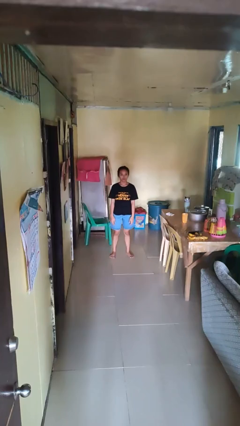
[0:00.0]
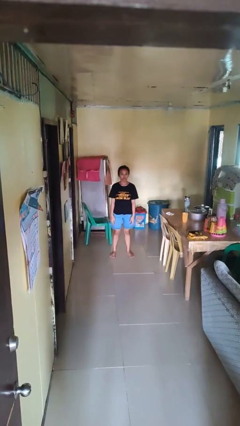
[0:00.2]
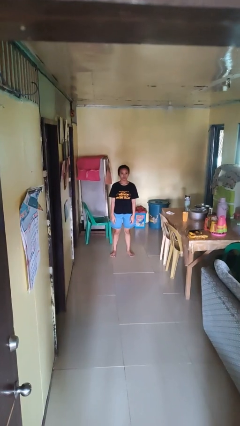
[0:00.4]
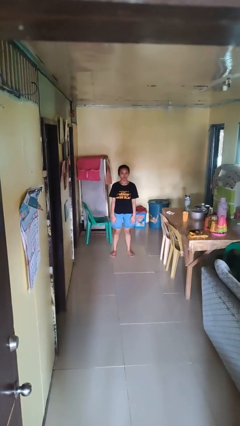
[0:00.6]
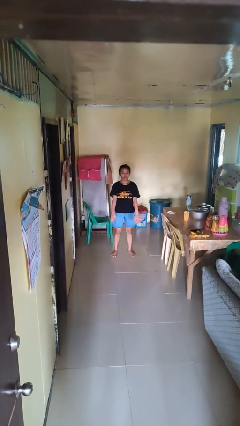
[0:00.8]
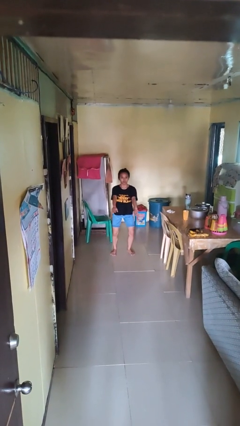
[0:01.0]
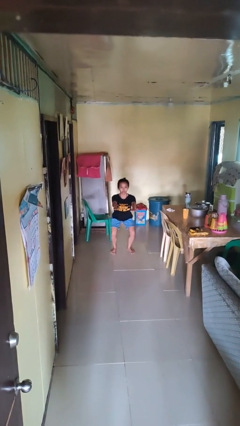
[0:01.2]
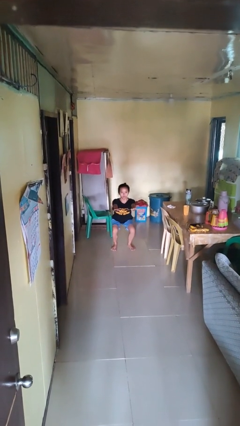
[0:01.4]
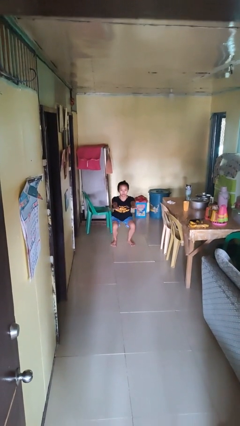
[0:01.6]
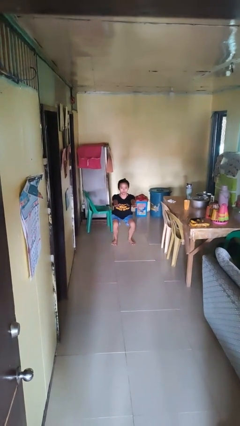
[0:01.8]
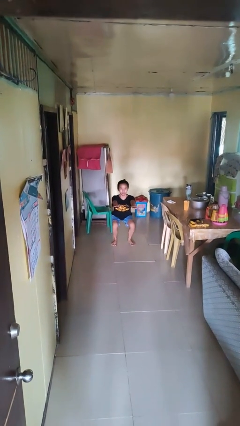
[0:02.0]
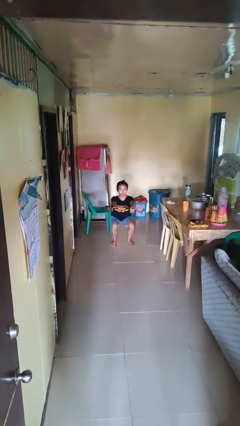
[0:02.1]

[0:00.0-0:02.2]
person squats

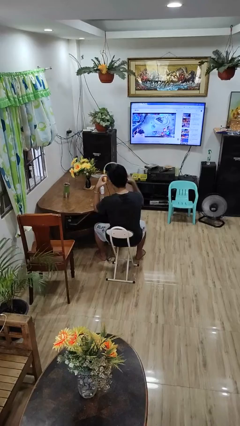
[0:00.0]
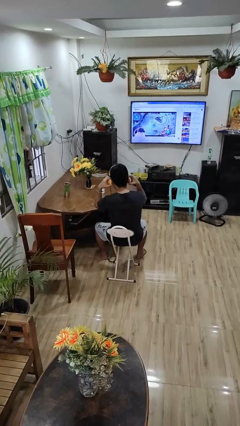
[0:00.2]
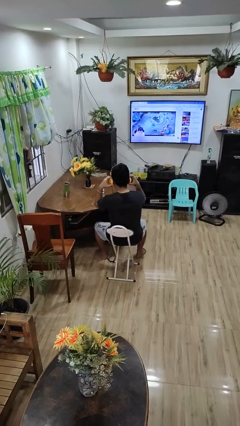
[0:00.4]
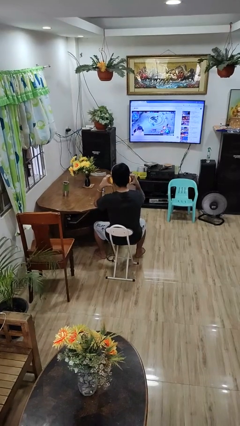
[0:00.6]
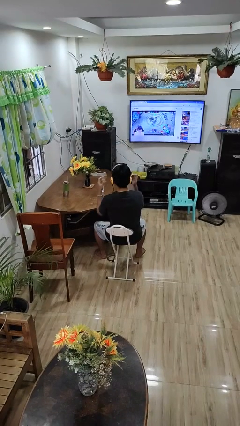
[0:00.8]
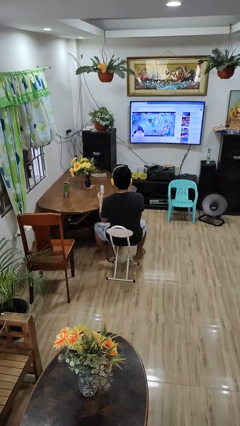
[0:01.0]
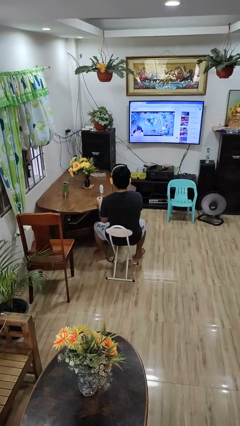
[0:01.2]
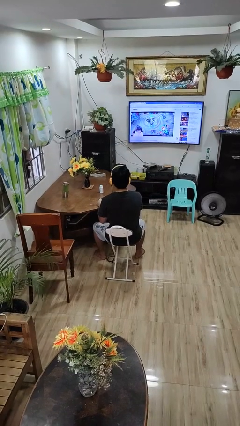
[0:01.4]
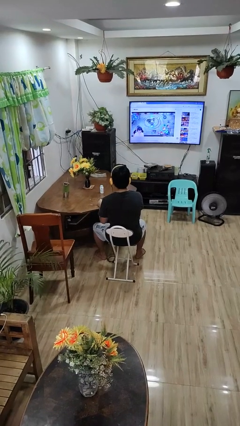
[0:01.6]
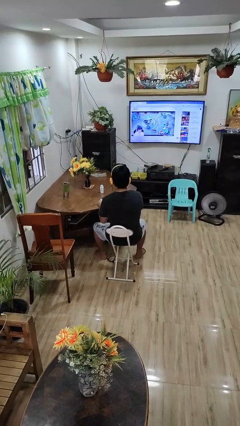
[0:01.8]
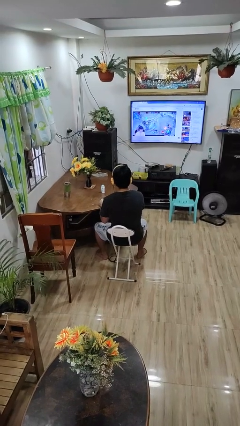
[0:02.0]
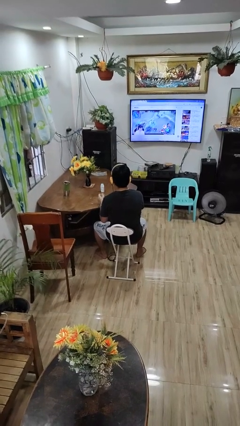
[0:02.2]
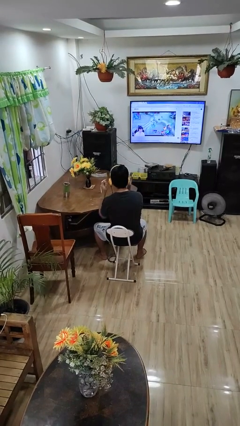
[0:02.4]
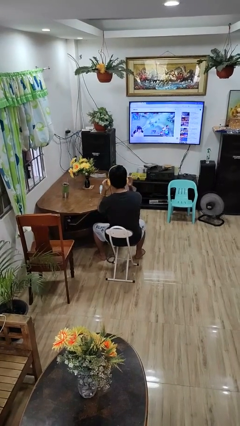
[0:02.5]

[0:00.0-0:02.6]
person puts on headphones

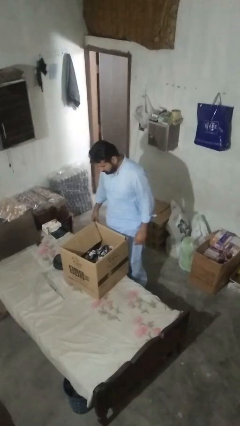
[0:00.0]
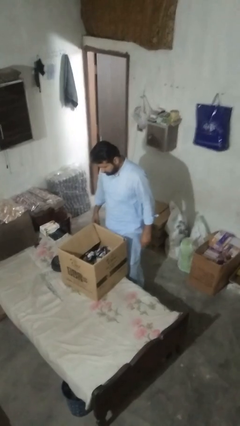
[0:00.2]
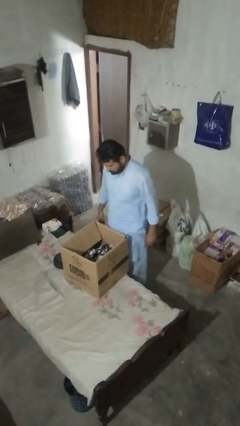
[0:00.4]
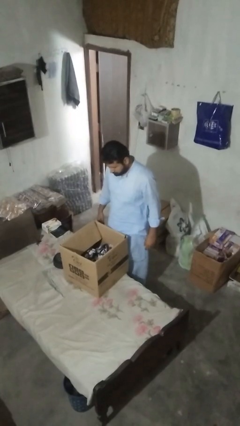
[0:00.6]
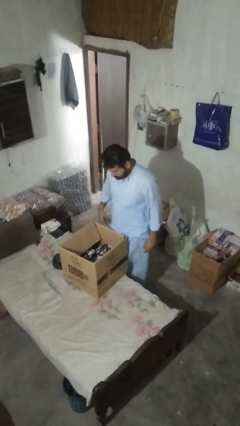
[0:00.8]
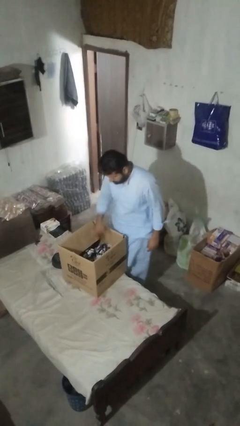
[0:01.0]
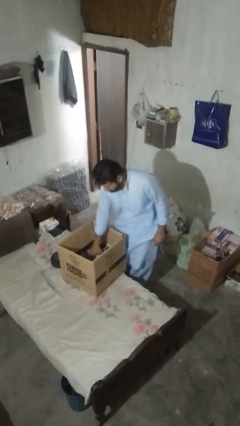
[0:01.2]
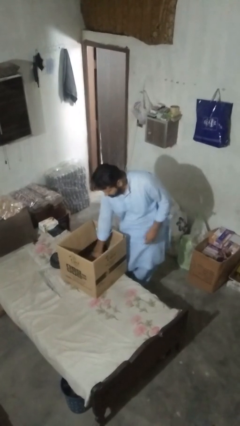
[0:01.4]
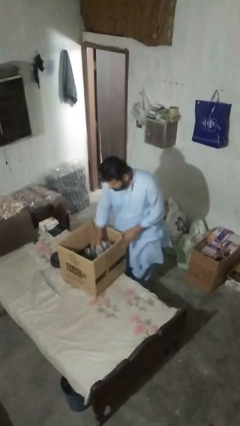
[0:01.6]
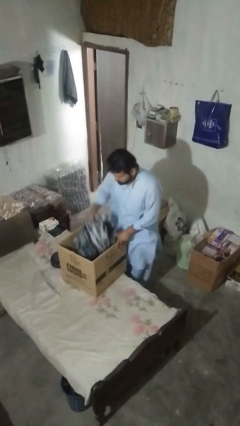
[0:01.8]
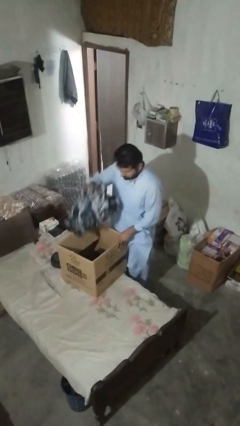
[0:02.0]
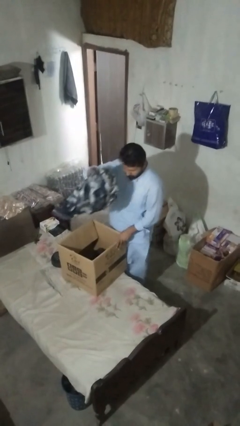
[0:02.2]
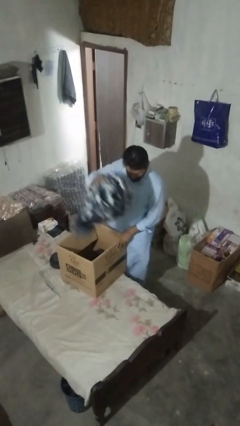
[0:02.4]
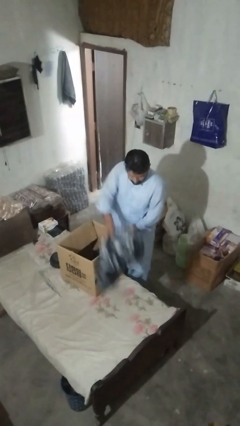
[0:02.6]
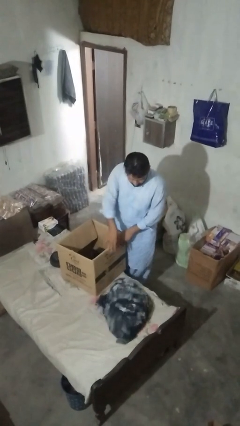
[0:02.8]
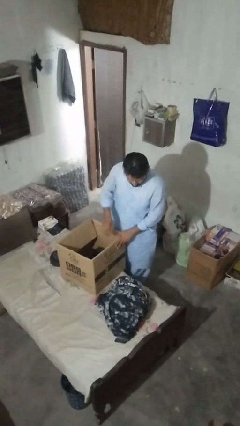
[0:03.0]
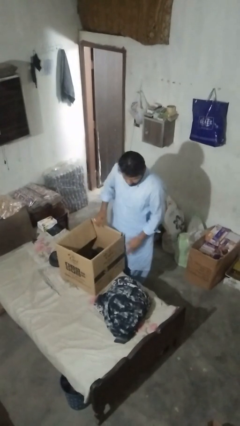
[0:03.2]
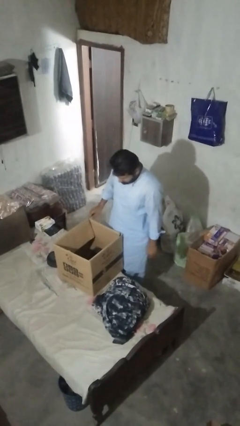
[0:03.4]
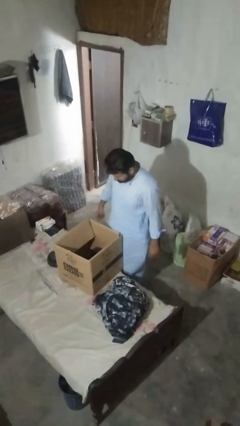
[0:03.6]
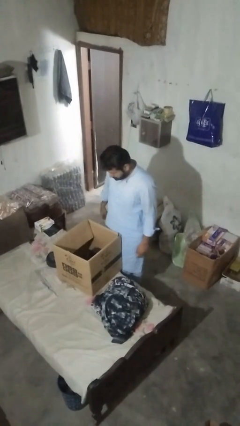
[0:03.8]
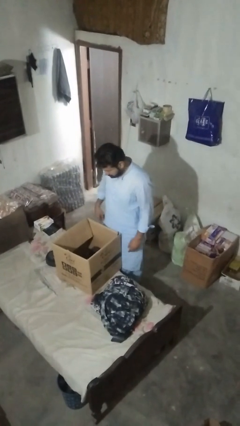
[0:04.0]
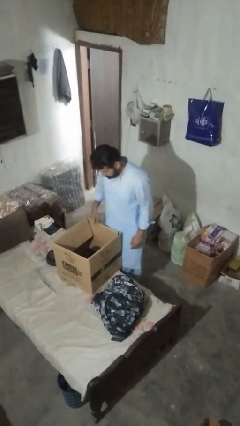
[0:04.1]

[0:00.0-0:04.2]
person unloads clotheswasher

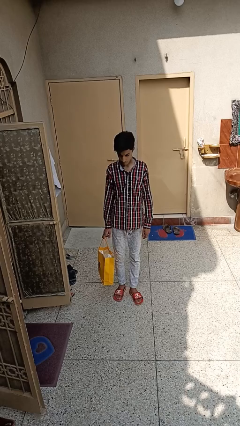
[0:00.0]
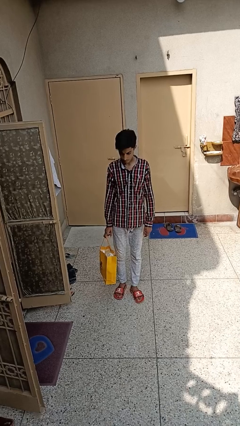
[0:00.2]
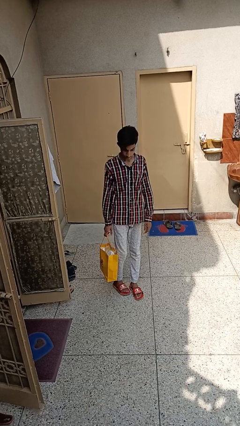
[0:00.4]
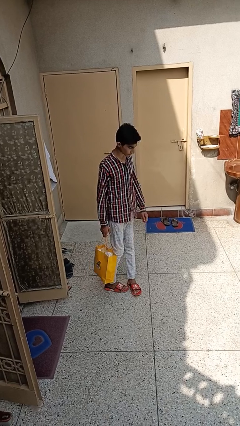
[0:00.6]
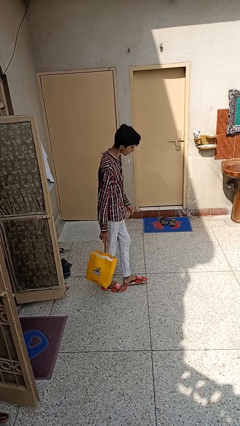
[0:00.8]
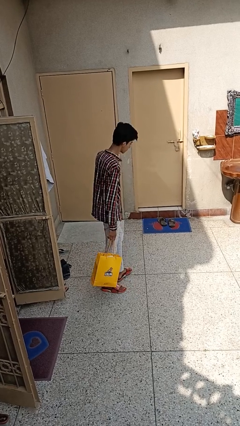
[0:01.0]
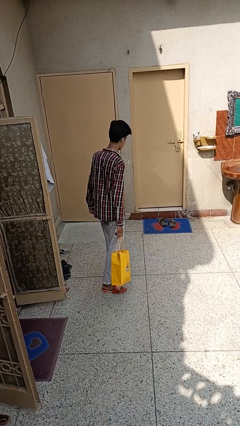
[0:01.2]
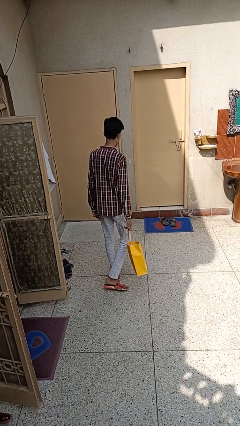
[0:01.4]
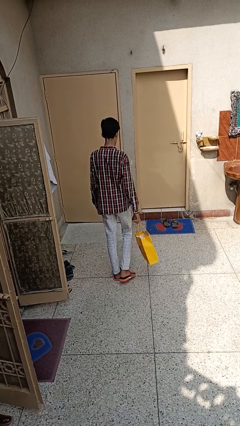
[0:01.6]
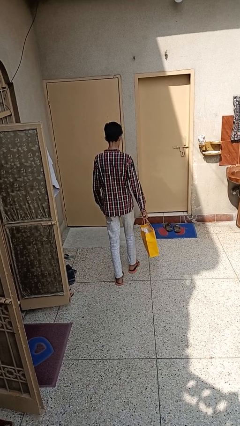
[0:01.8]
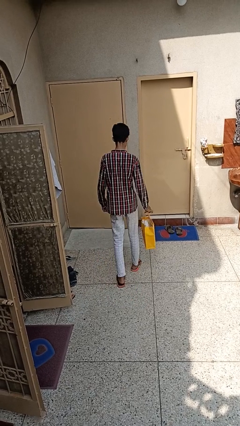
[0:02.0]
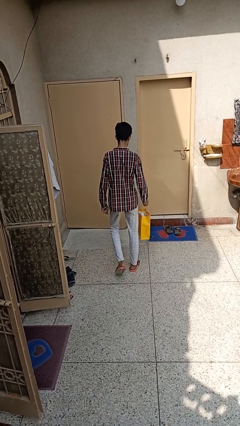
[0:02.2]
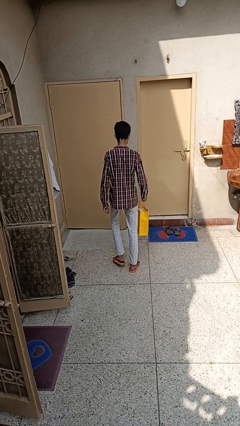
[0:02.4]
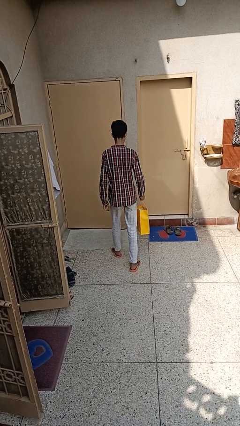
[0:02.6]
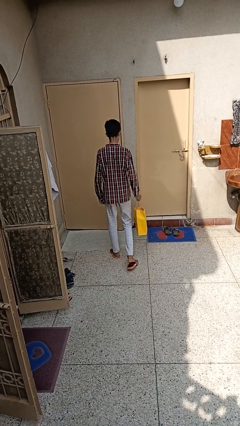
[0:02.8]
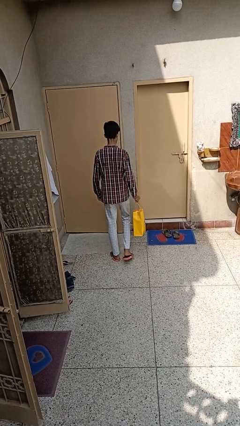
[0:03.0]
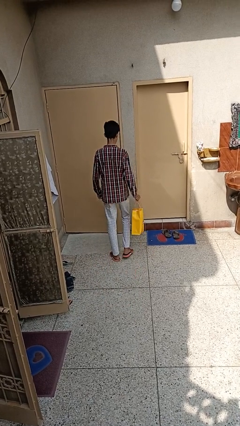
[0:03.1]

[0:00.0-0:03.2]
person carries groceries

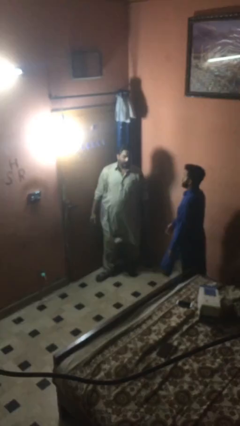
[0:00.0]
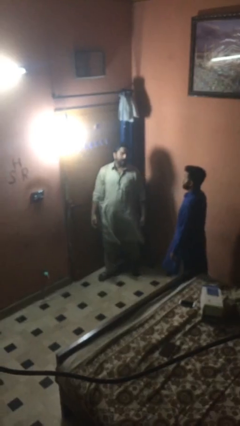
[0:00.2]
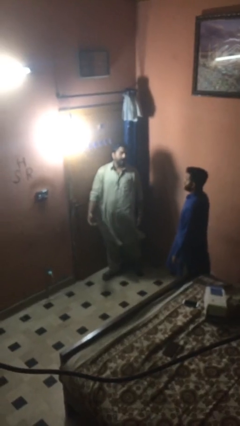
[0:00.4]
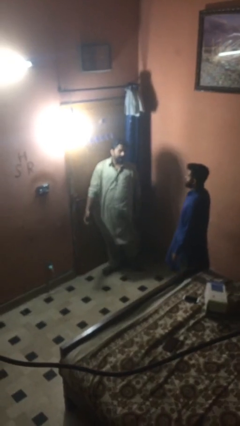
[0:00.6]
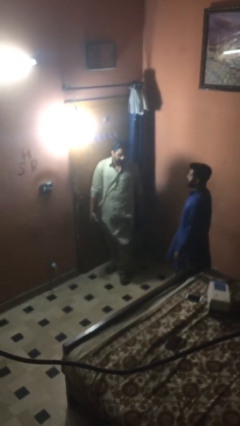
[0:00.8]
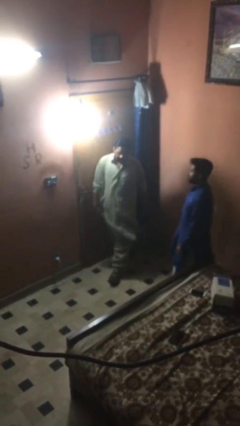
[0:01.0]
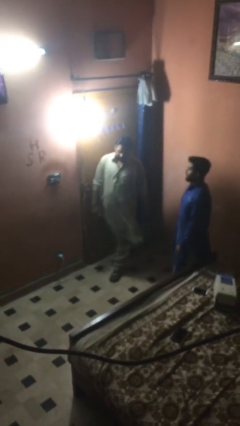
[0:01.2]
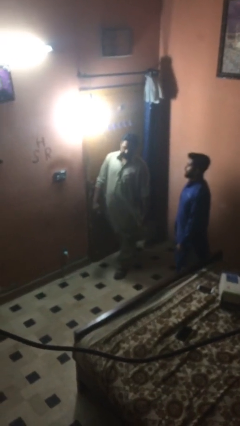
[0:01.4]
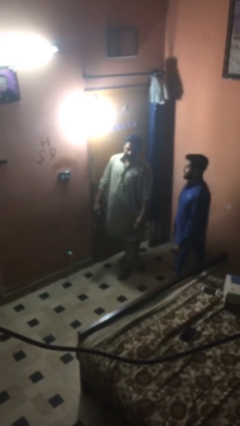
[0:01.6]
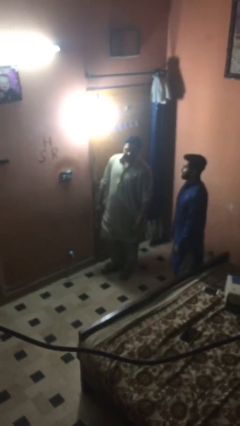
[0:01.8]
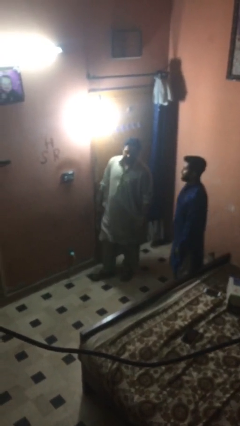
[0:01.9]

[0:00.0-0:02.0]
person talks to person

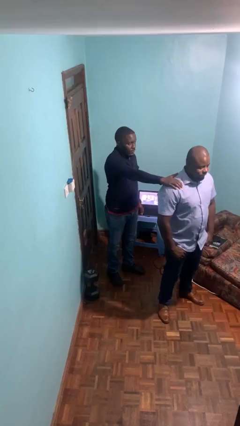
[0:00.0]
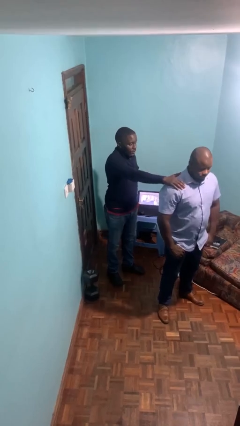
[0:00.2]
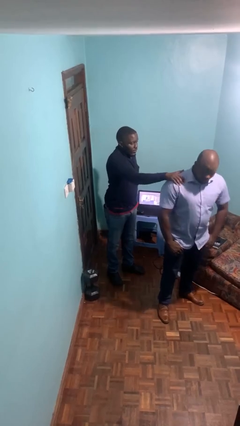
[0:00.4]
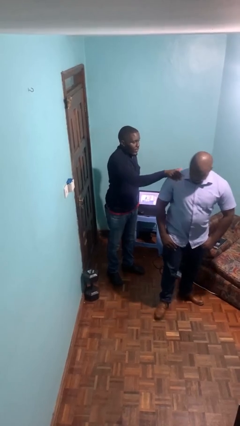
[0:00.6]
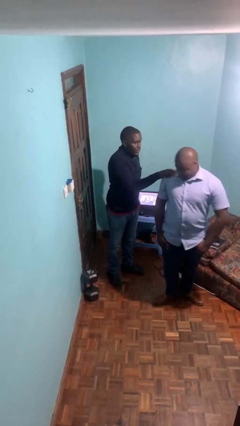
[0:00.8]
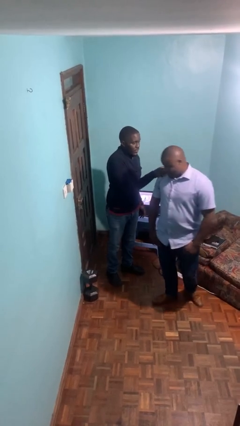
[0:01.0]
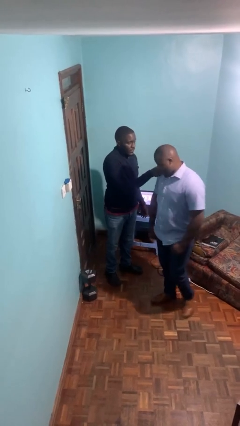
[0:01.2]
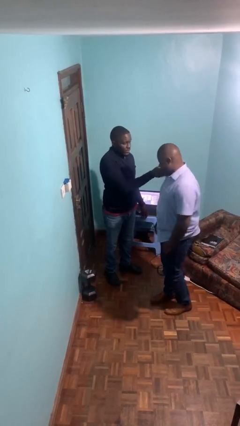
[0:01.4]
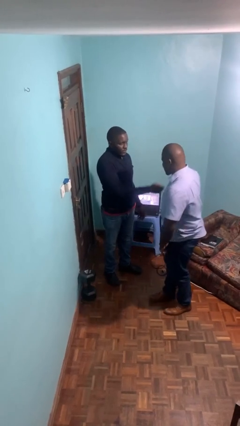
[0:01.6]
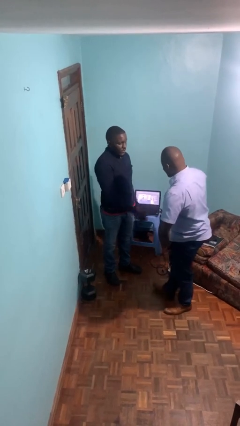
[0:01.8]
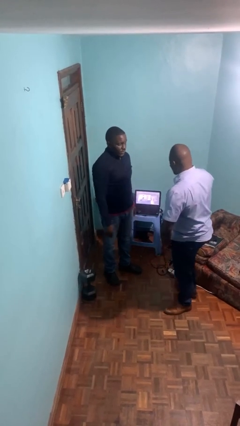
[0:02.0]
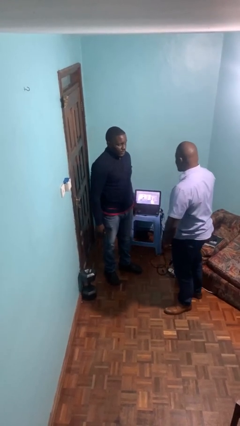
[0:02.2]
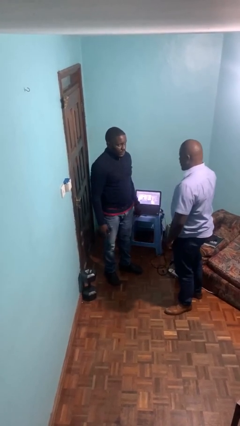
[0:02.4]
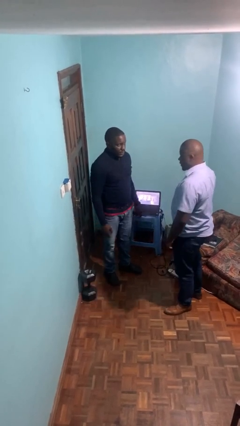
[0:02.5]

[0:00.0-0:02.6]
person spins person around

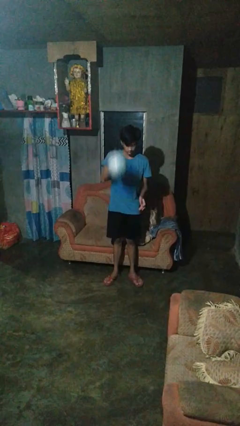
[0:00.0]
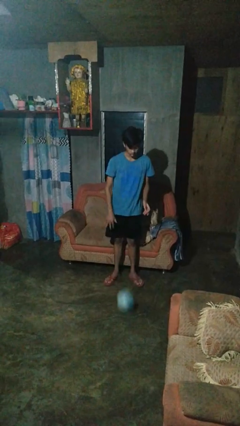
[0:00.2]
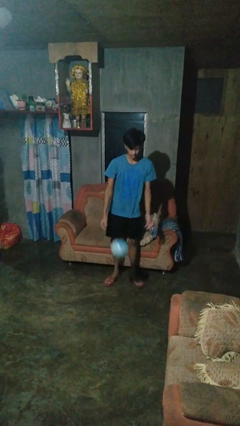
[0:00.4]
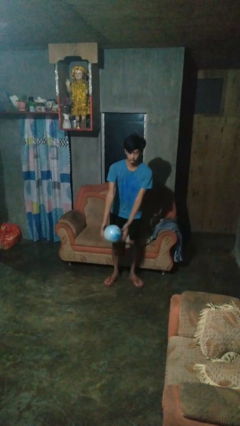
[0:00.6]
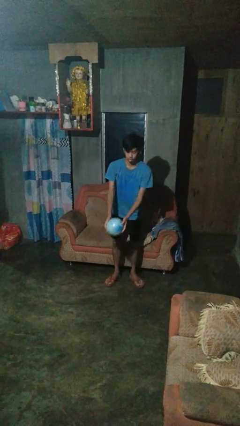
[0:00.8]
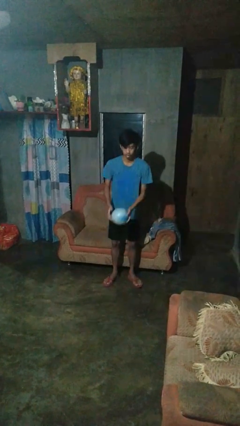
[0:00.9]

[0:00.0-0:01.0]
person bounces ball on floor
